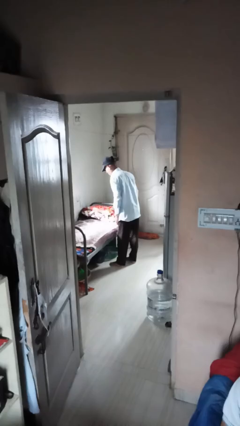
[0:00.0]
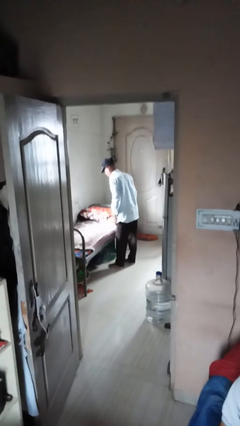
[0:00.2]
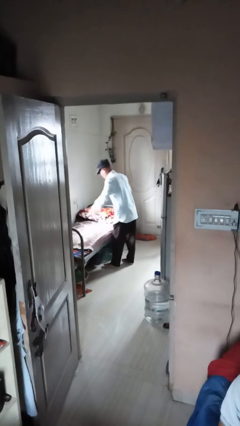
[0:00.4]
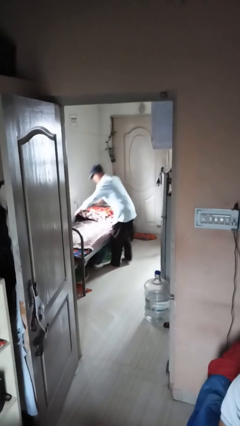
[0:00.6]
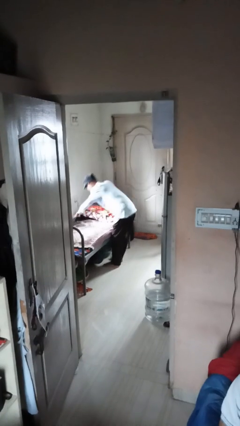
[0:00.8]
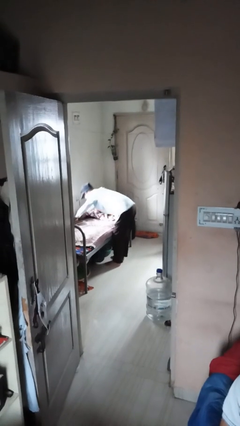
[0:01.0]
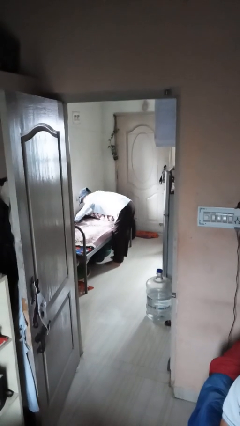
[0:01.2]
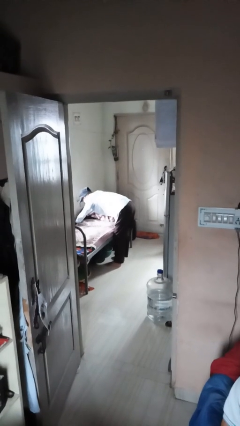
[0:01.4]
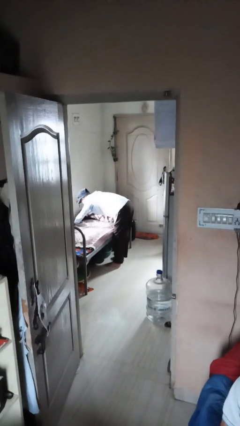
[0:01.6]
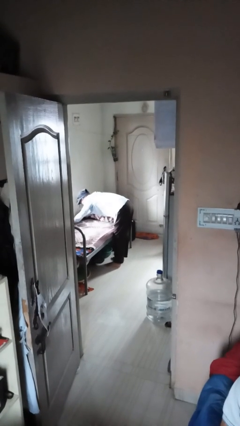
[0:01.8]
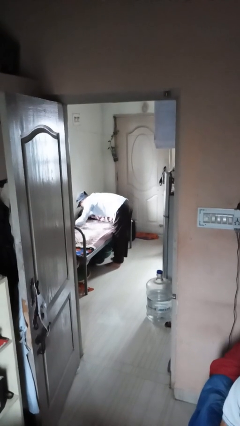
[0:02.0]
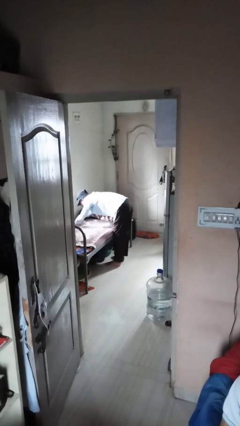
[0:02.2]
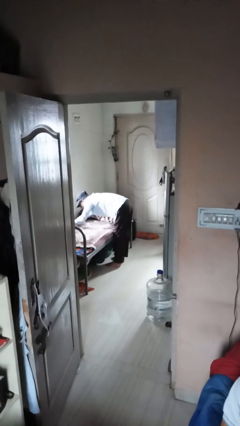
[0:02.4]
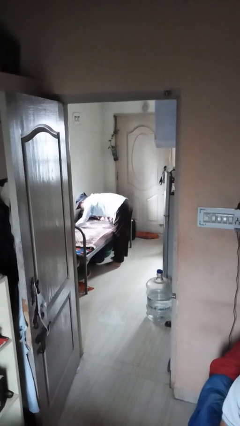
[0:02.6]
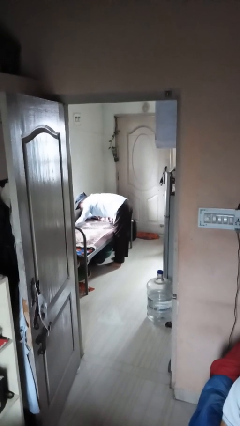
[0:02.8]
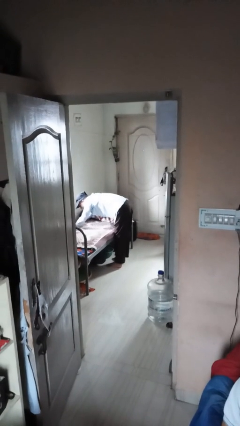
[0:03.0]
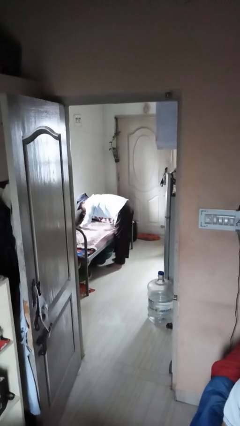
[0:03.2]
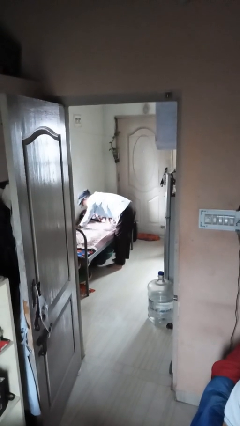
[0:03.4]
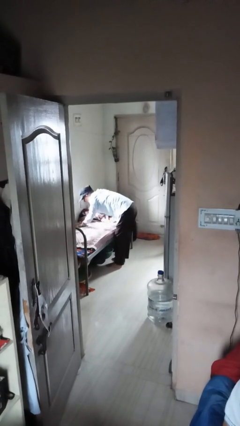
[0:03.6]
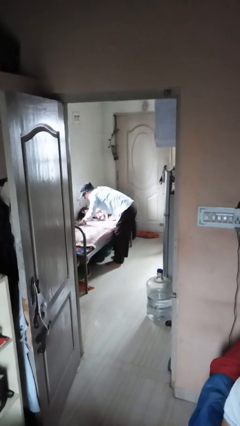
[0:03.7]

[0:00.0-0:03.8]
person makes bed

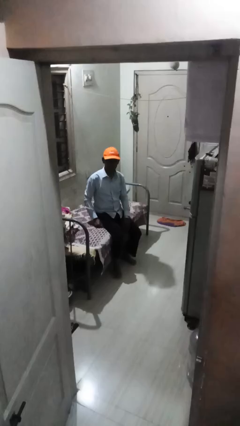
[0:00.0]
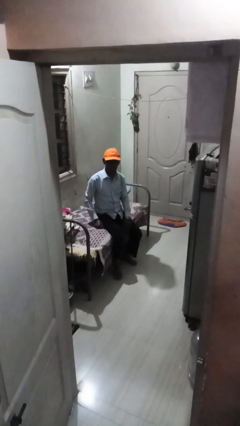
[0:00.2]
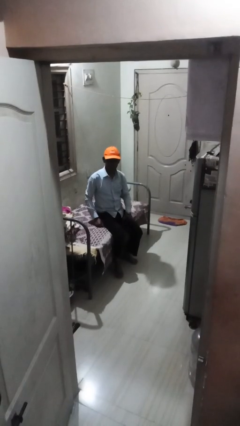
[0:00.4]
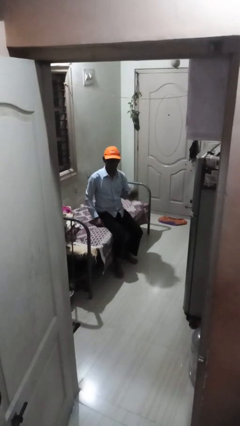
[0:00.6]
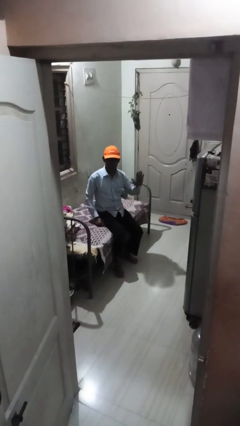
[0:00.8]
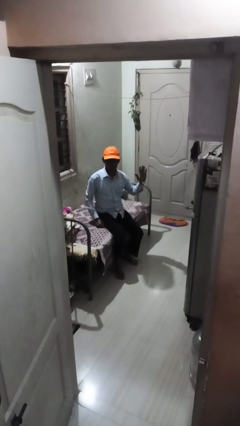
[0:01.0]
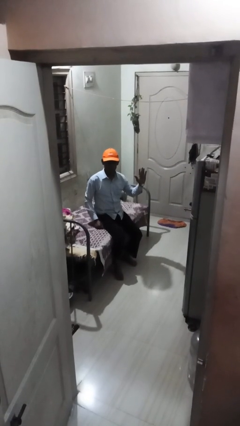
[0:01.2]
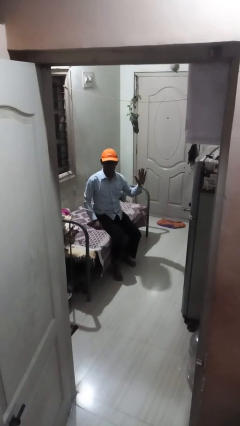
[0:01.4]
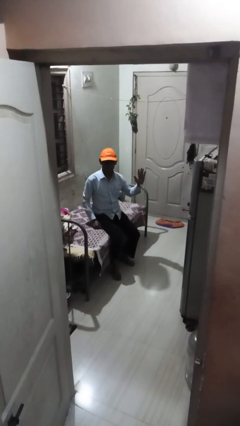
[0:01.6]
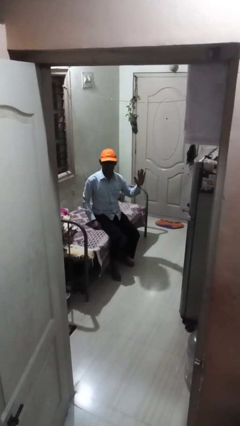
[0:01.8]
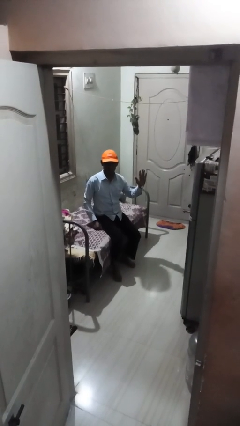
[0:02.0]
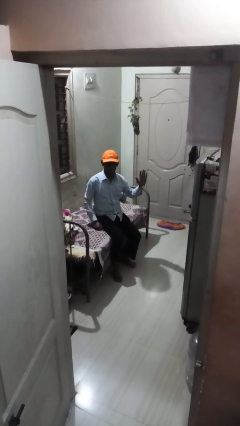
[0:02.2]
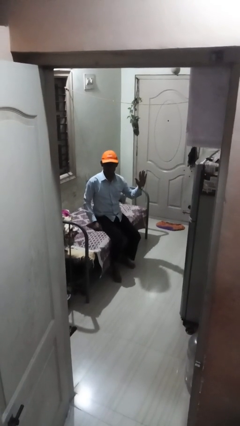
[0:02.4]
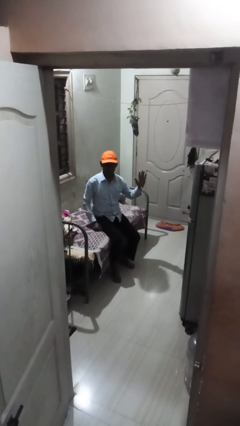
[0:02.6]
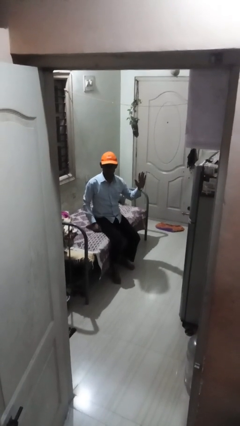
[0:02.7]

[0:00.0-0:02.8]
person gestures number five

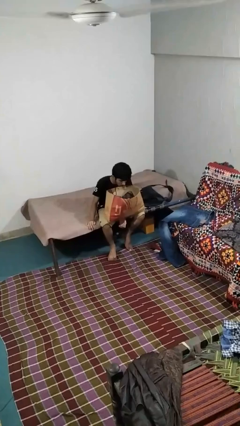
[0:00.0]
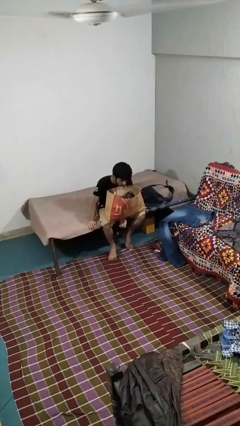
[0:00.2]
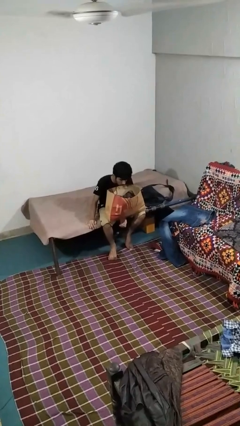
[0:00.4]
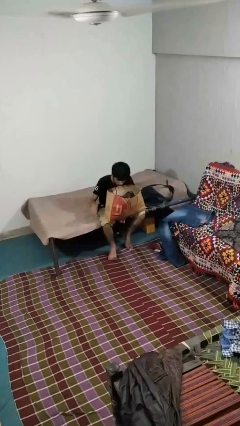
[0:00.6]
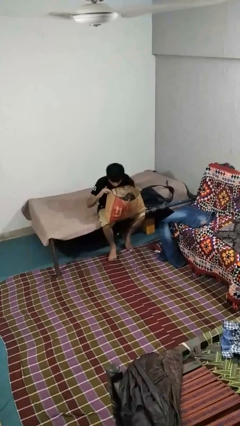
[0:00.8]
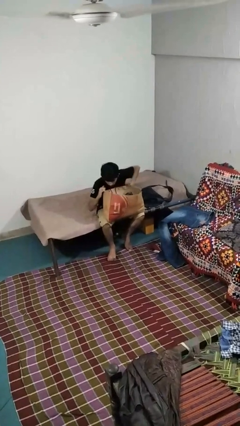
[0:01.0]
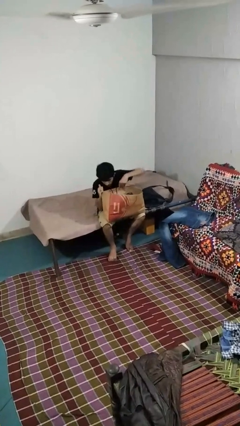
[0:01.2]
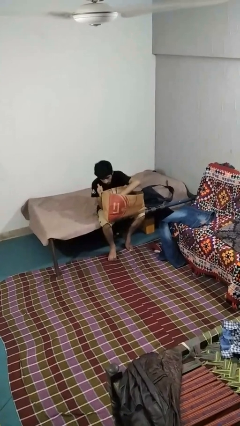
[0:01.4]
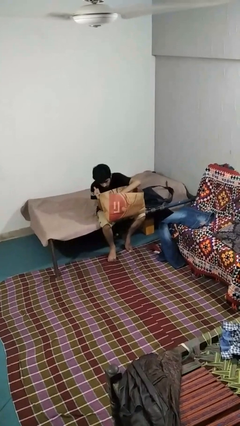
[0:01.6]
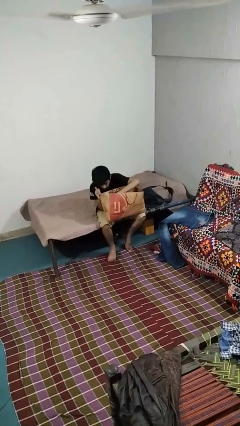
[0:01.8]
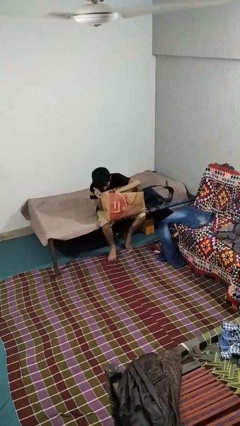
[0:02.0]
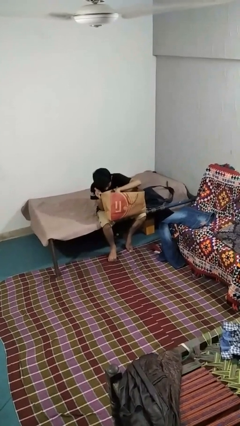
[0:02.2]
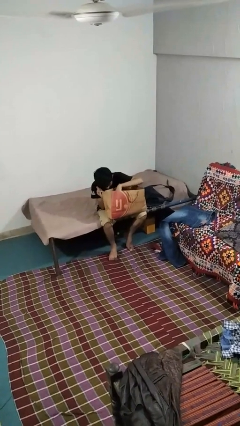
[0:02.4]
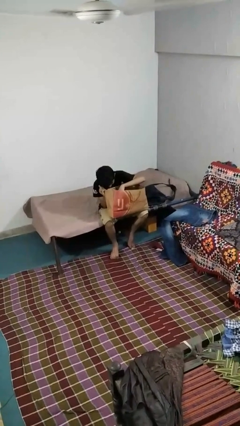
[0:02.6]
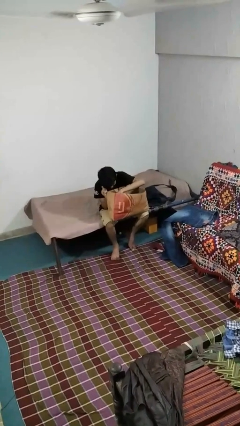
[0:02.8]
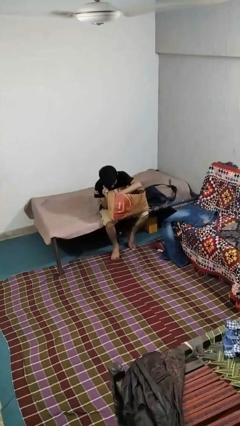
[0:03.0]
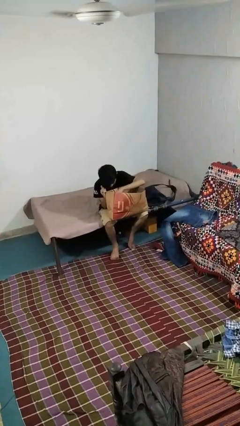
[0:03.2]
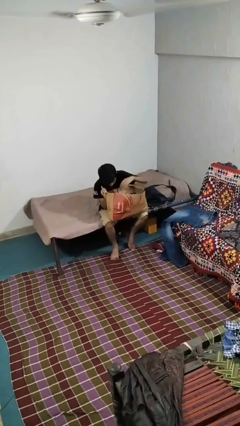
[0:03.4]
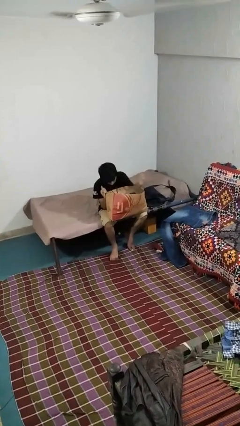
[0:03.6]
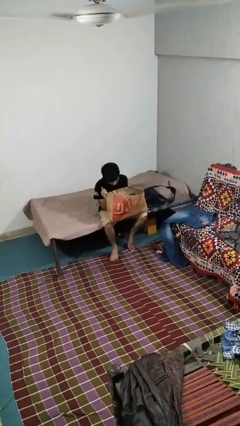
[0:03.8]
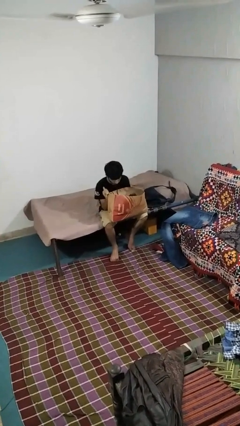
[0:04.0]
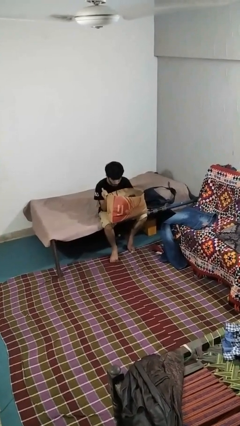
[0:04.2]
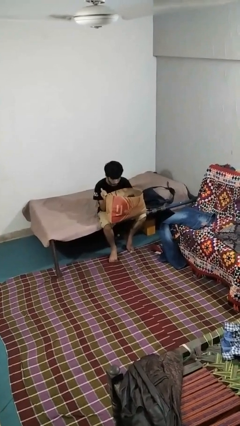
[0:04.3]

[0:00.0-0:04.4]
person searches in bag

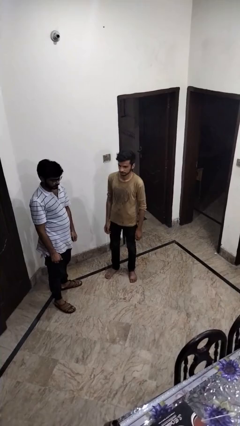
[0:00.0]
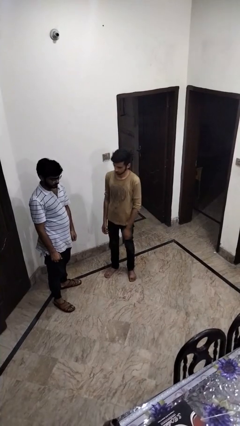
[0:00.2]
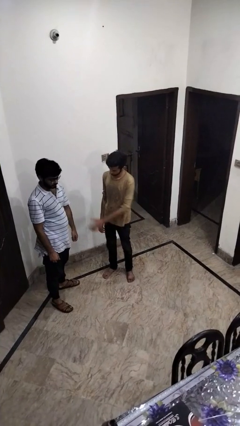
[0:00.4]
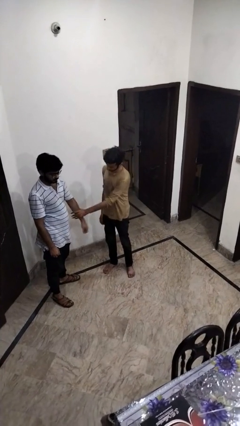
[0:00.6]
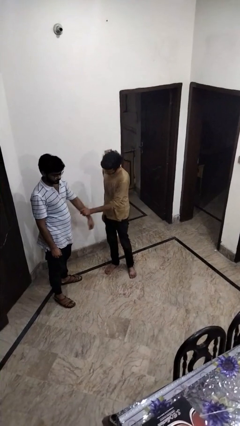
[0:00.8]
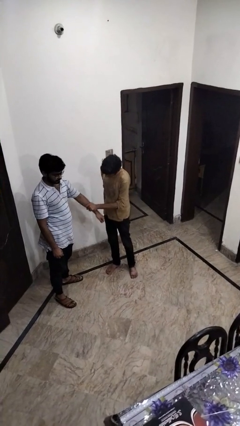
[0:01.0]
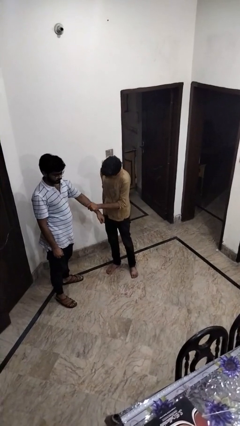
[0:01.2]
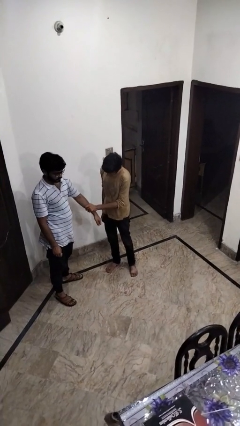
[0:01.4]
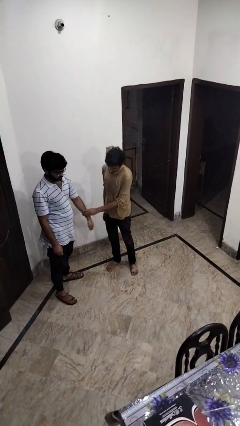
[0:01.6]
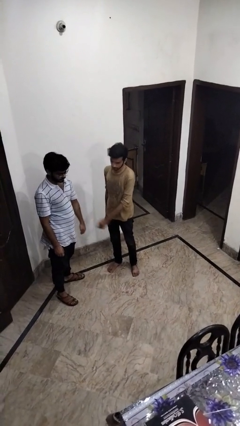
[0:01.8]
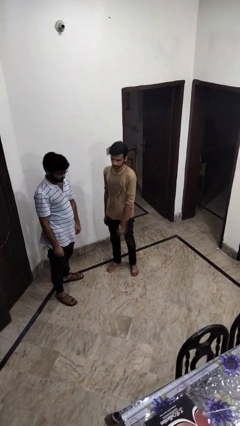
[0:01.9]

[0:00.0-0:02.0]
person grabs person by forearm

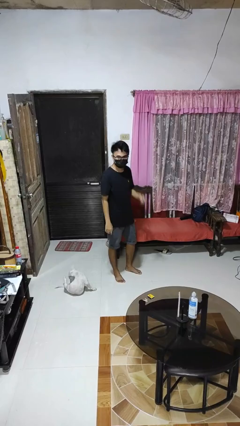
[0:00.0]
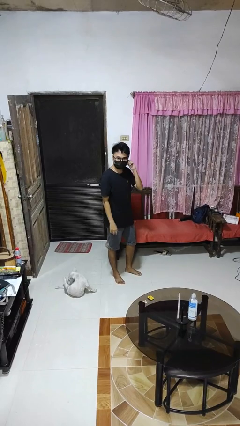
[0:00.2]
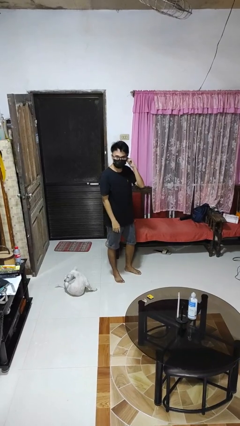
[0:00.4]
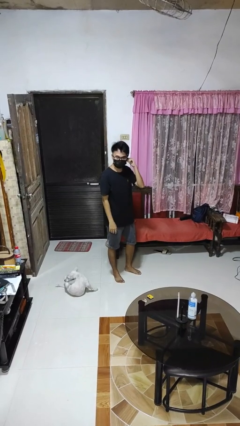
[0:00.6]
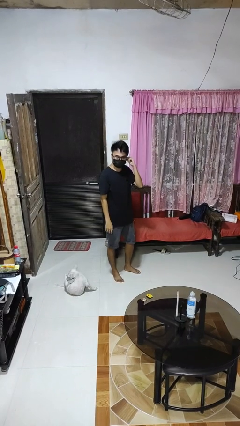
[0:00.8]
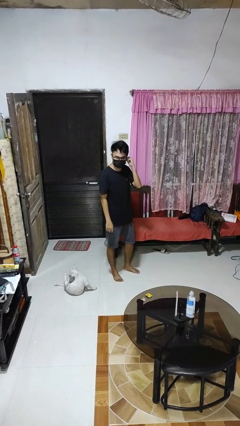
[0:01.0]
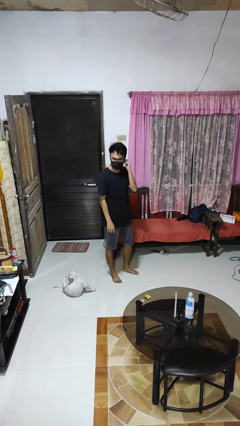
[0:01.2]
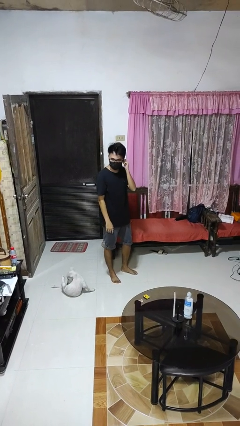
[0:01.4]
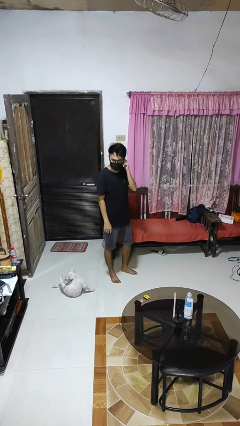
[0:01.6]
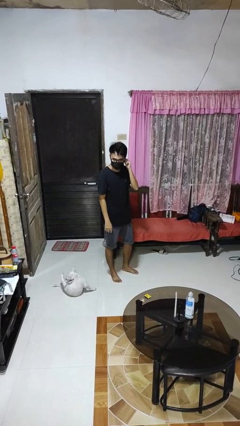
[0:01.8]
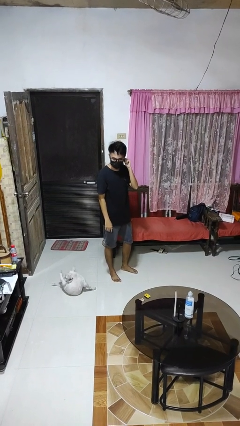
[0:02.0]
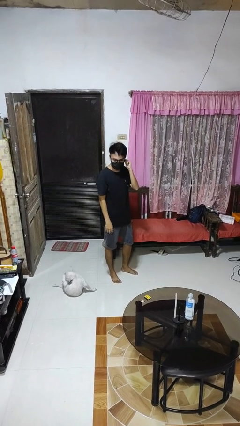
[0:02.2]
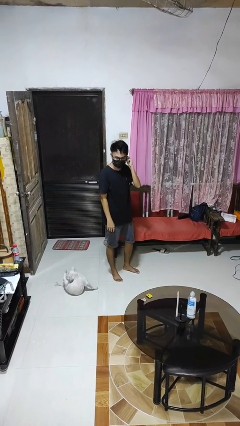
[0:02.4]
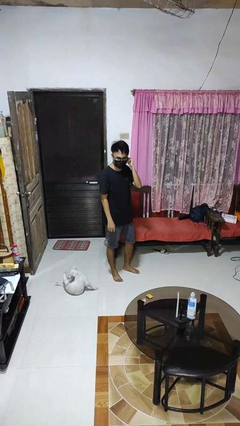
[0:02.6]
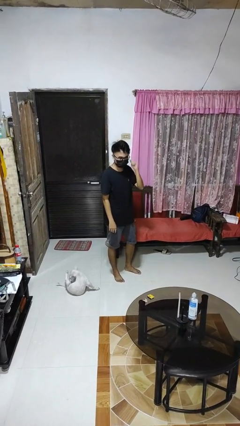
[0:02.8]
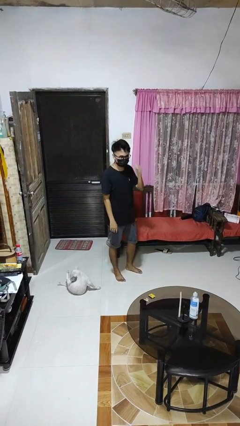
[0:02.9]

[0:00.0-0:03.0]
person touches earlobe

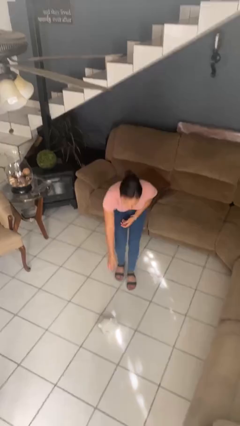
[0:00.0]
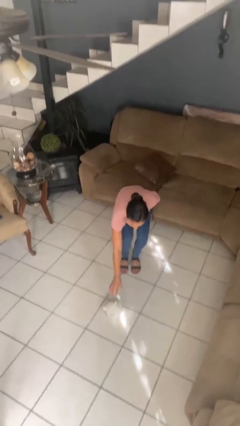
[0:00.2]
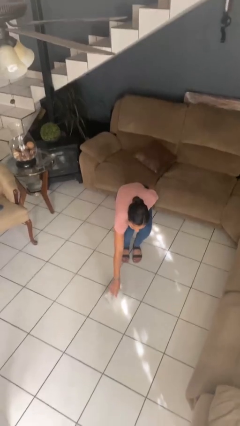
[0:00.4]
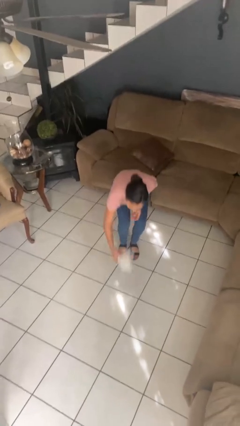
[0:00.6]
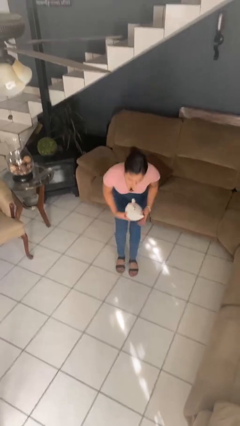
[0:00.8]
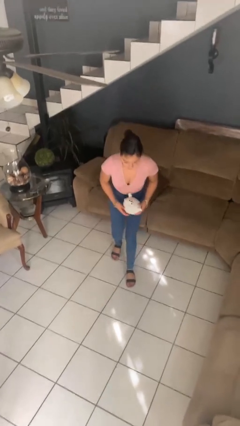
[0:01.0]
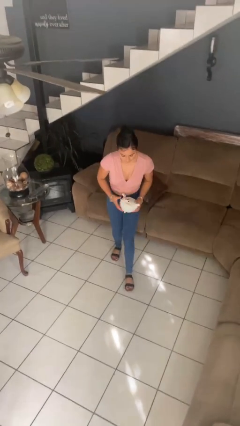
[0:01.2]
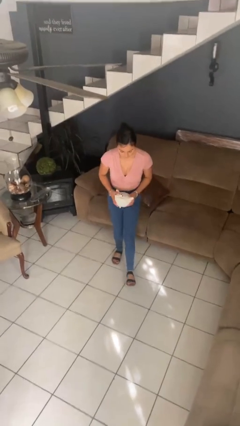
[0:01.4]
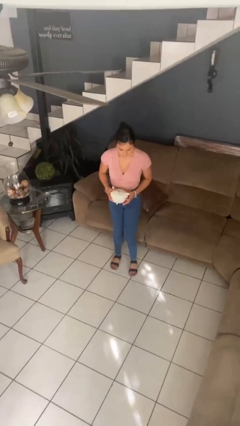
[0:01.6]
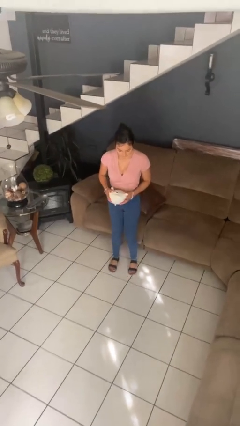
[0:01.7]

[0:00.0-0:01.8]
person picks up object from floor
